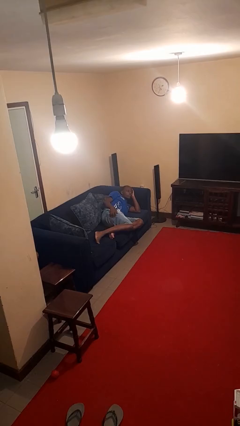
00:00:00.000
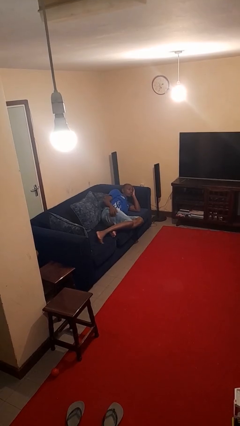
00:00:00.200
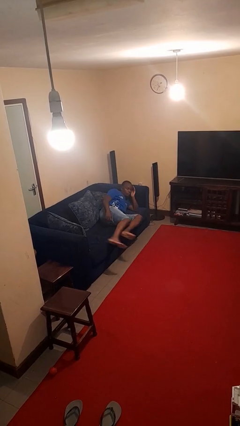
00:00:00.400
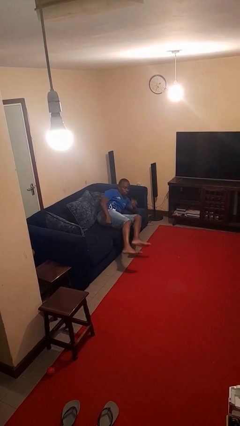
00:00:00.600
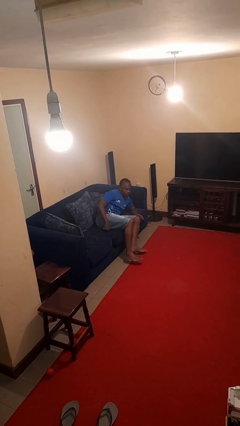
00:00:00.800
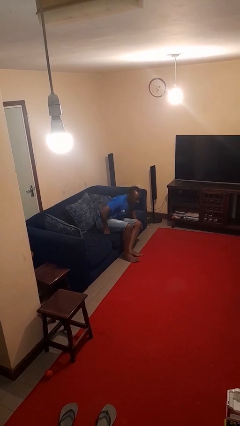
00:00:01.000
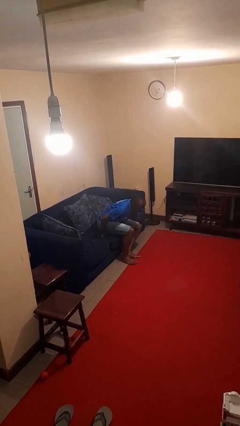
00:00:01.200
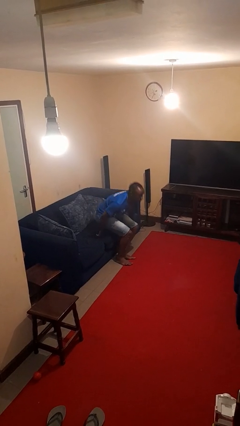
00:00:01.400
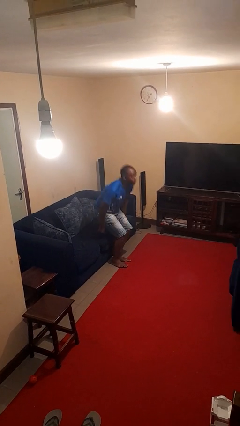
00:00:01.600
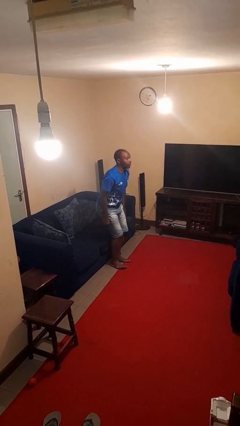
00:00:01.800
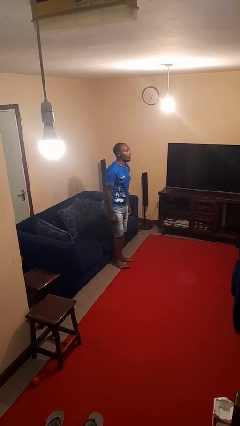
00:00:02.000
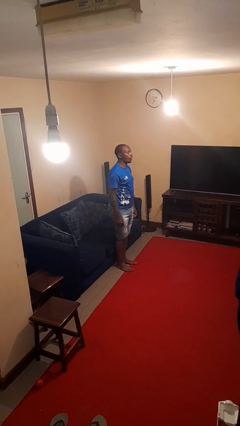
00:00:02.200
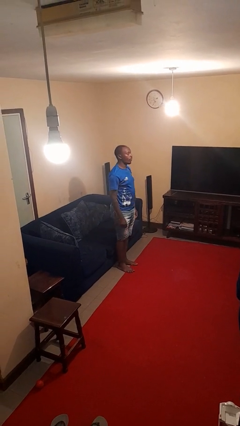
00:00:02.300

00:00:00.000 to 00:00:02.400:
person stands up

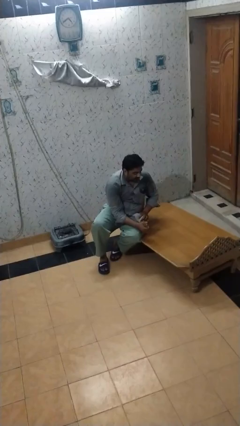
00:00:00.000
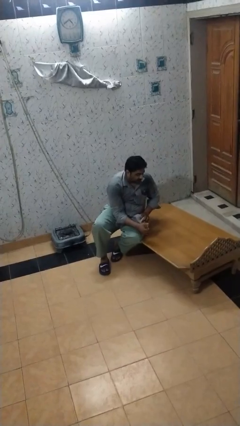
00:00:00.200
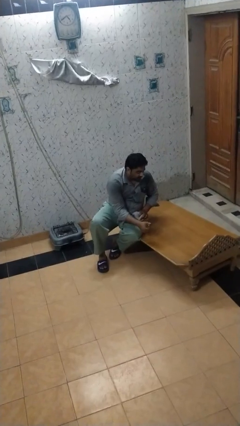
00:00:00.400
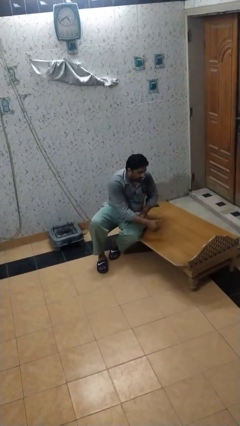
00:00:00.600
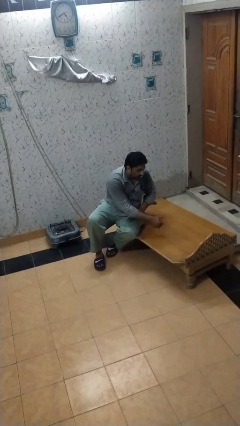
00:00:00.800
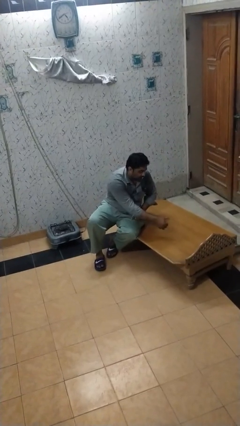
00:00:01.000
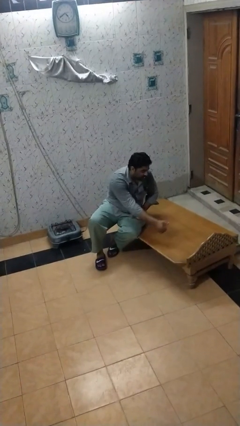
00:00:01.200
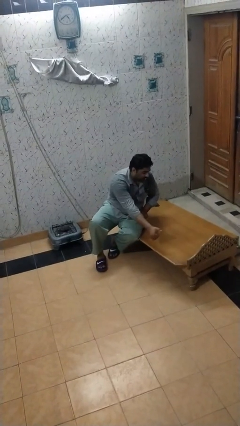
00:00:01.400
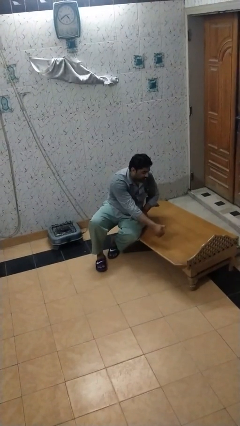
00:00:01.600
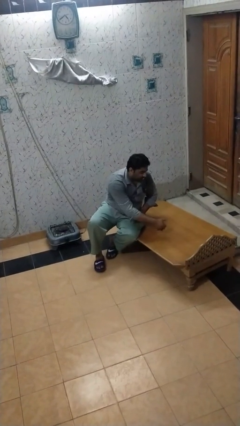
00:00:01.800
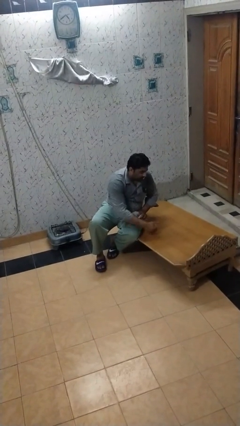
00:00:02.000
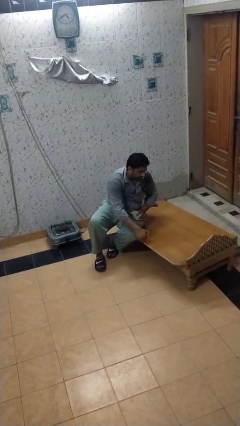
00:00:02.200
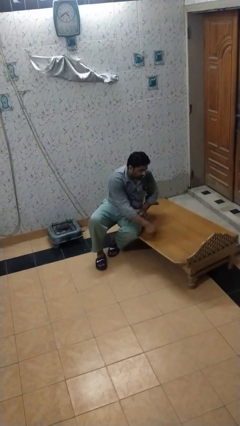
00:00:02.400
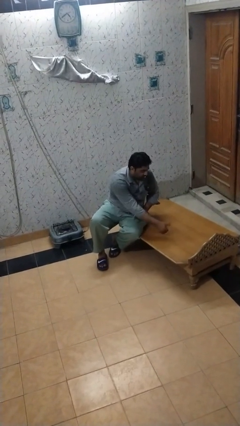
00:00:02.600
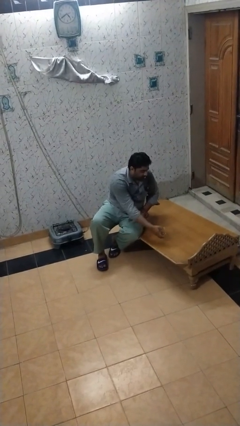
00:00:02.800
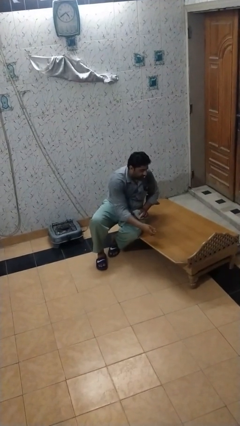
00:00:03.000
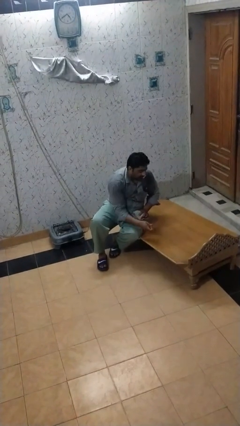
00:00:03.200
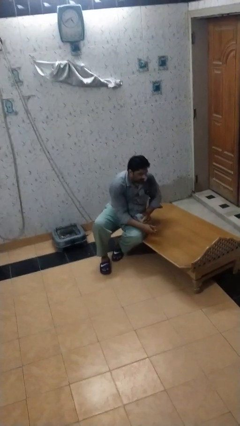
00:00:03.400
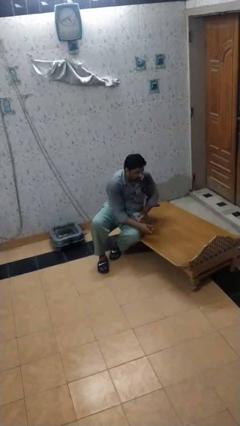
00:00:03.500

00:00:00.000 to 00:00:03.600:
person sprays from bottle

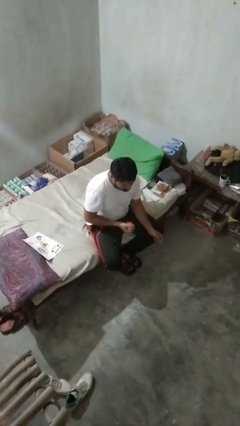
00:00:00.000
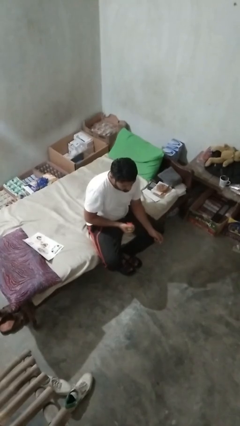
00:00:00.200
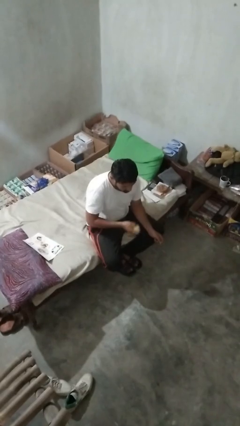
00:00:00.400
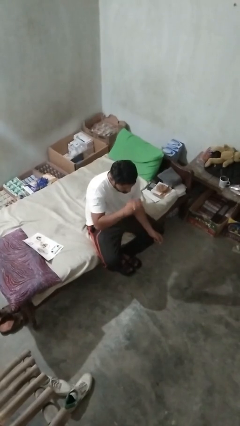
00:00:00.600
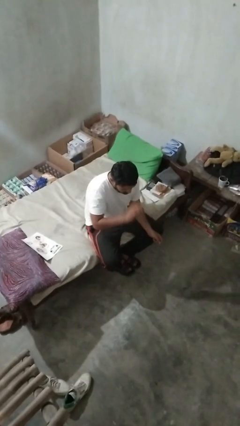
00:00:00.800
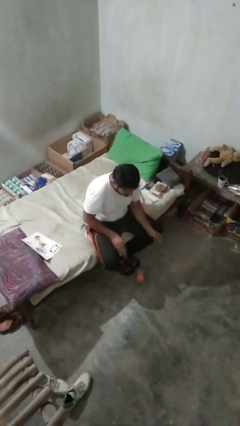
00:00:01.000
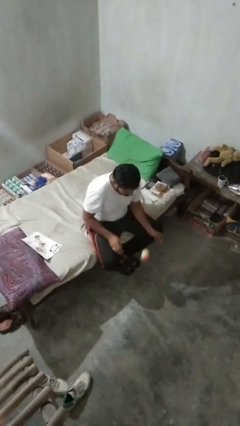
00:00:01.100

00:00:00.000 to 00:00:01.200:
person bounces ball on floor

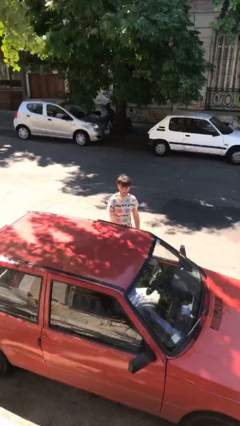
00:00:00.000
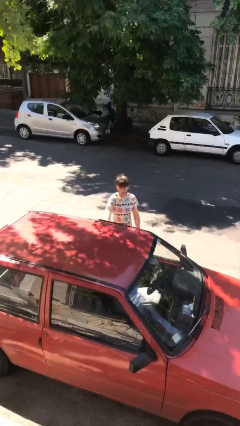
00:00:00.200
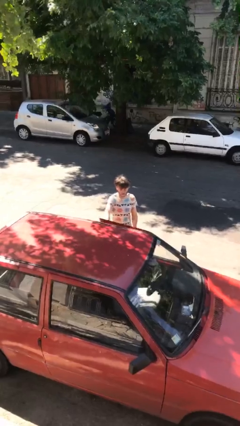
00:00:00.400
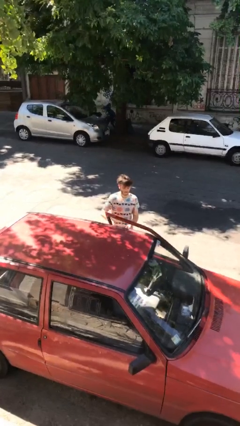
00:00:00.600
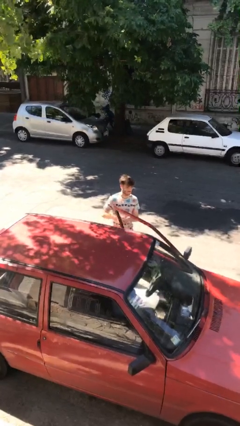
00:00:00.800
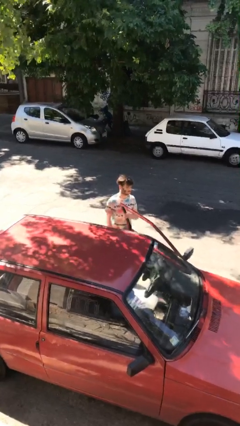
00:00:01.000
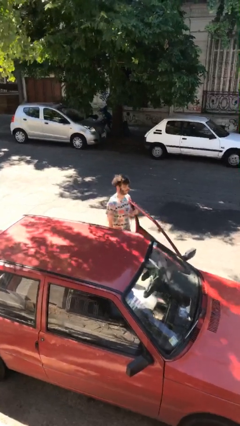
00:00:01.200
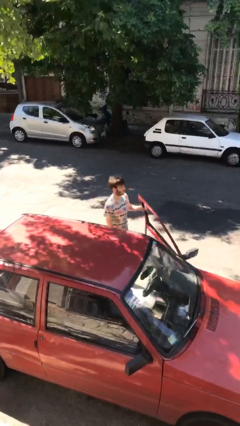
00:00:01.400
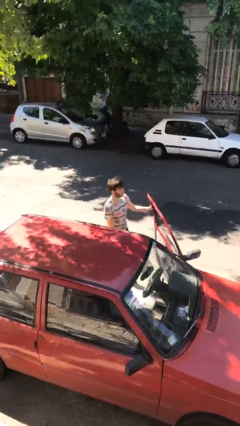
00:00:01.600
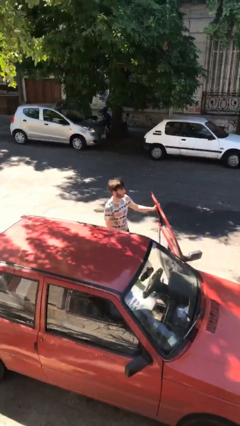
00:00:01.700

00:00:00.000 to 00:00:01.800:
person opens car door

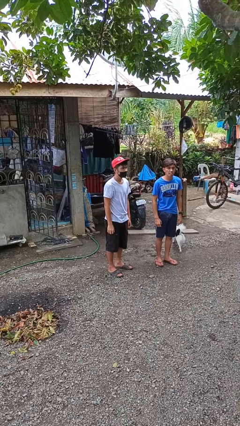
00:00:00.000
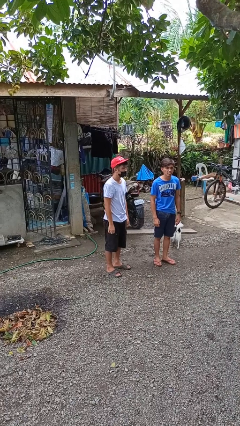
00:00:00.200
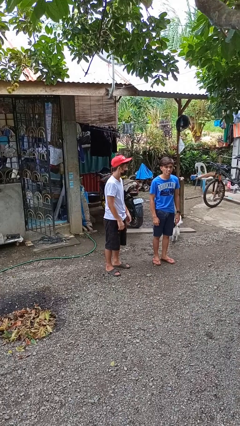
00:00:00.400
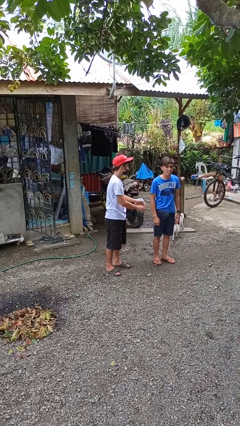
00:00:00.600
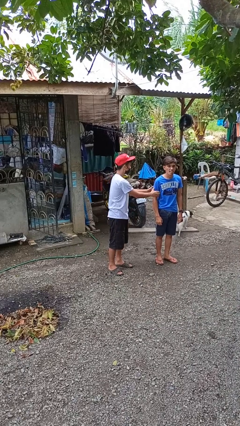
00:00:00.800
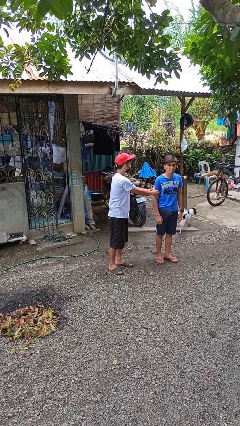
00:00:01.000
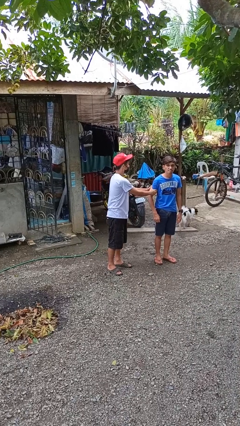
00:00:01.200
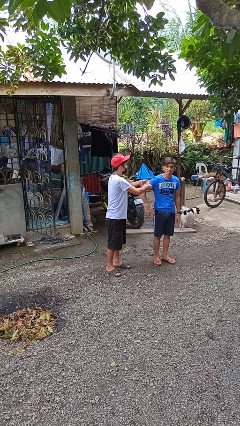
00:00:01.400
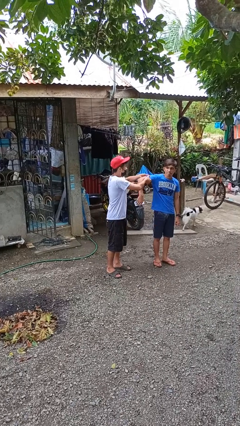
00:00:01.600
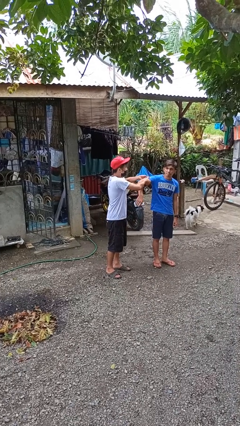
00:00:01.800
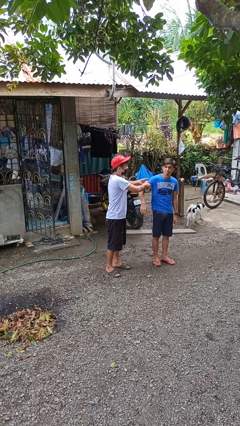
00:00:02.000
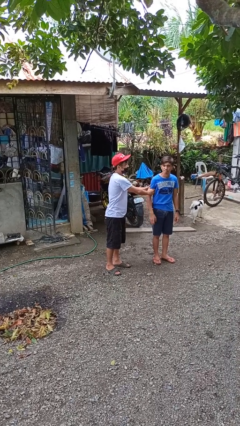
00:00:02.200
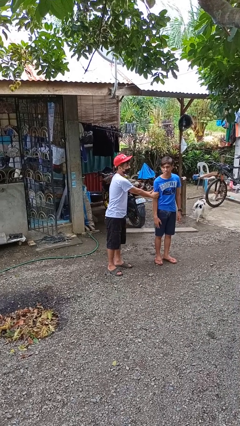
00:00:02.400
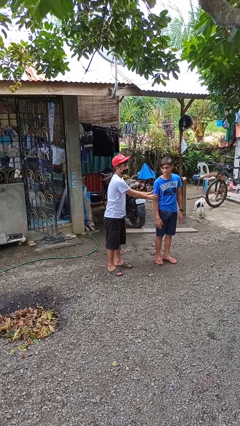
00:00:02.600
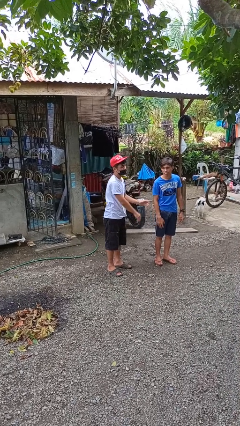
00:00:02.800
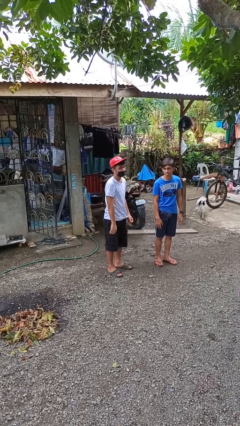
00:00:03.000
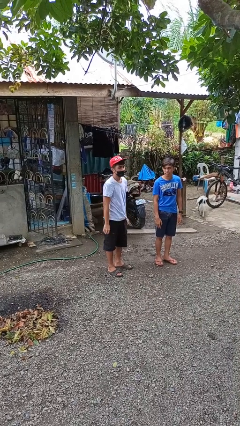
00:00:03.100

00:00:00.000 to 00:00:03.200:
person grabs person by bicep

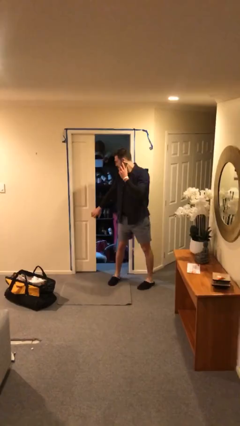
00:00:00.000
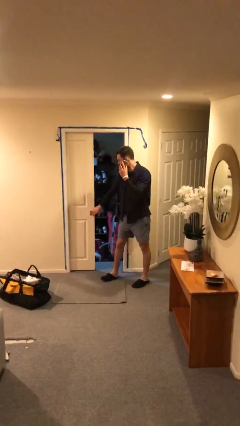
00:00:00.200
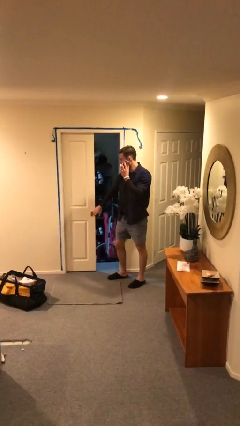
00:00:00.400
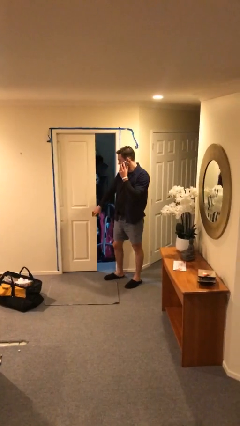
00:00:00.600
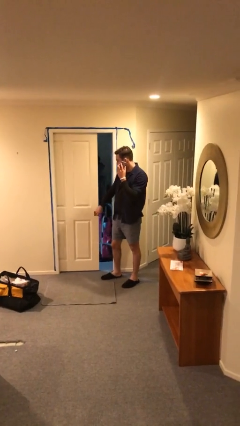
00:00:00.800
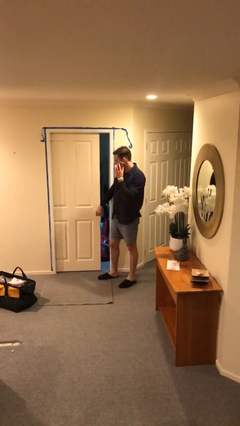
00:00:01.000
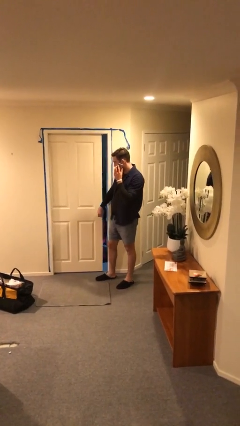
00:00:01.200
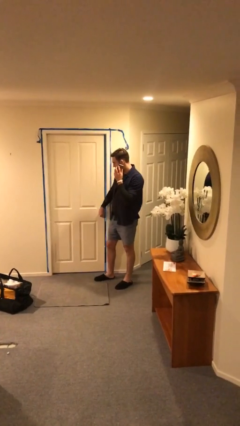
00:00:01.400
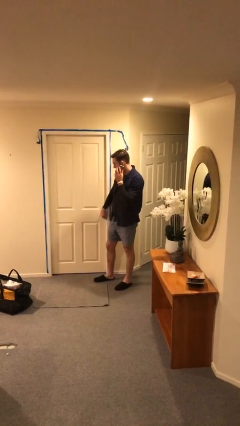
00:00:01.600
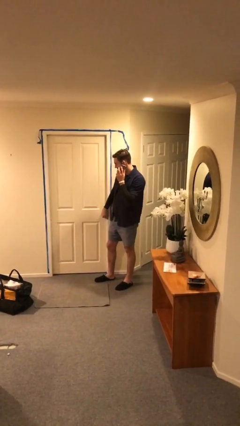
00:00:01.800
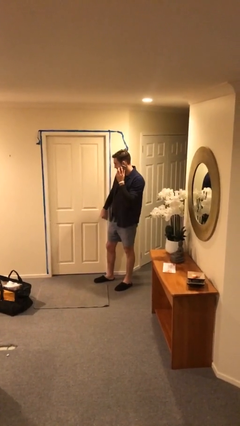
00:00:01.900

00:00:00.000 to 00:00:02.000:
person closes facility door

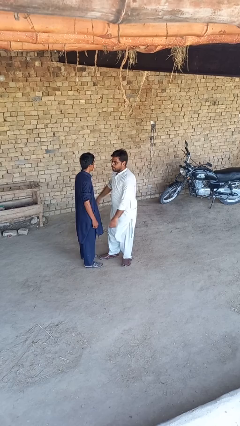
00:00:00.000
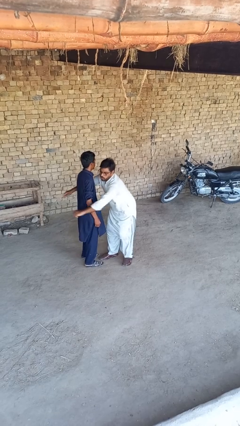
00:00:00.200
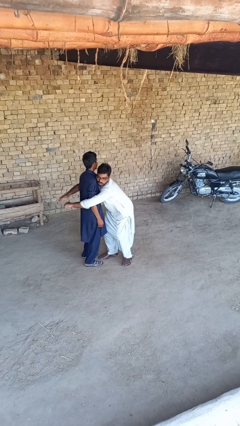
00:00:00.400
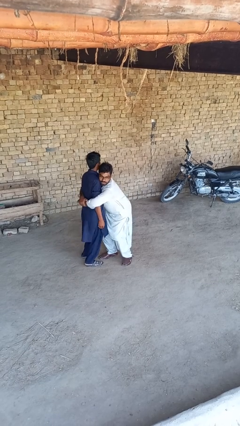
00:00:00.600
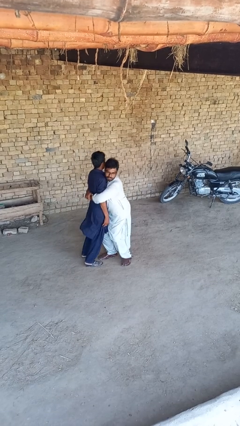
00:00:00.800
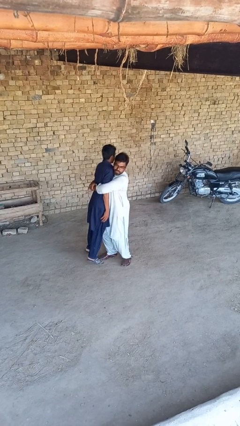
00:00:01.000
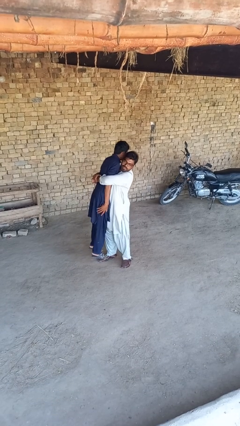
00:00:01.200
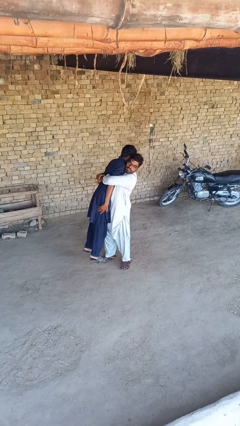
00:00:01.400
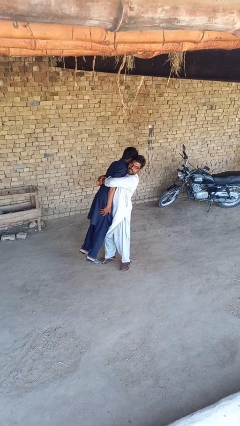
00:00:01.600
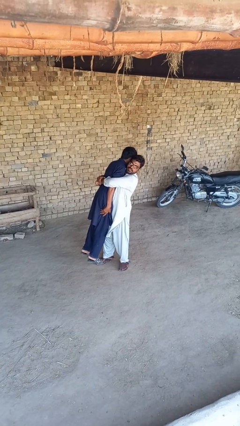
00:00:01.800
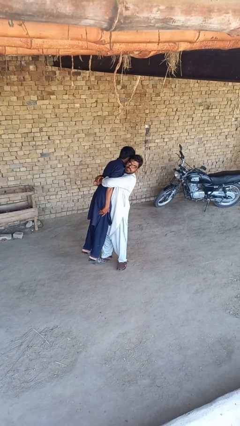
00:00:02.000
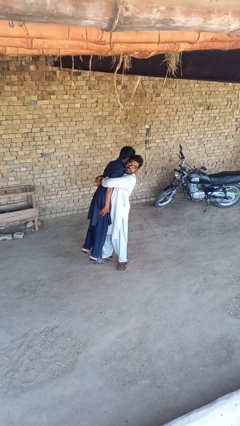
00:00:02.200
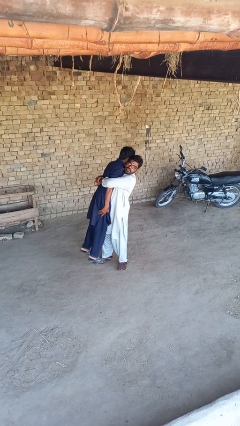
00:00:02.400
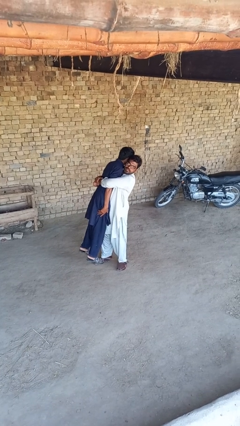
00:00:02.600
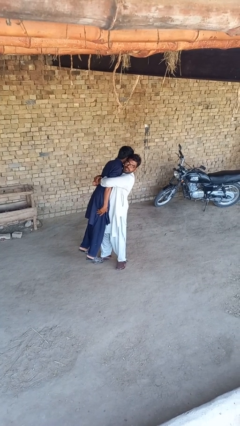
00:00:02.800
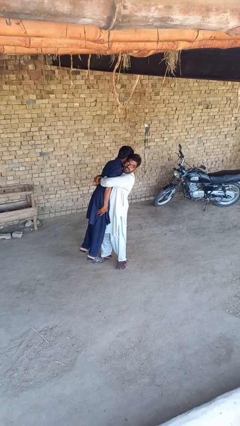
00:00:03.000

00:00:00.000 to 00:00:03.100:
person picks up person
